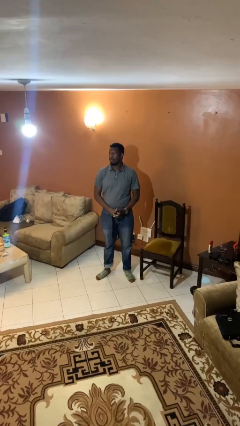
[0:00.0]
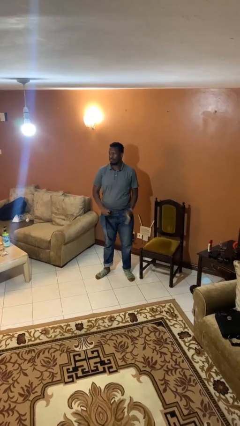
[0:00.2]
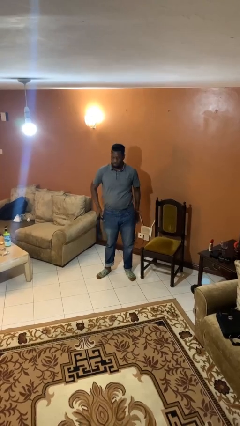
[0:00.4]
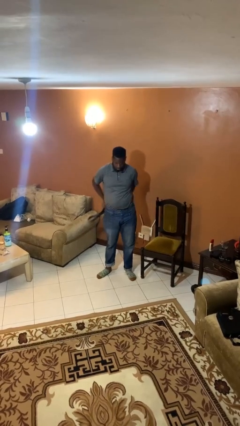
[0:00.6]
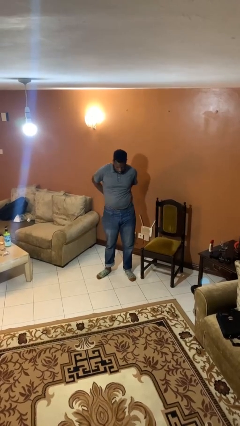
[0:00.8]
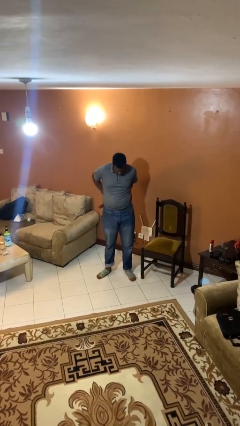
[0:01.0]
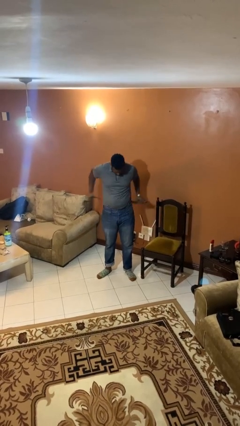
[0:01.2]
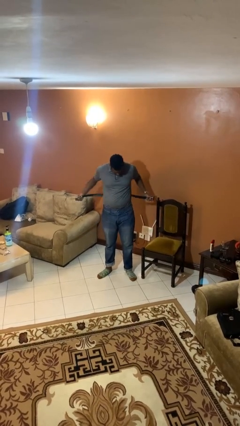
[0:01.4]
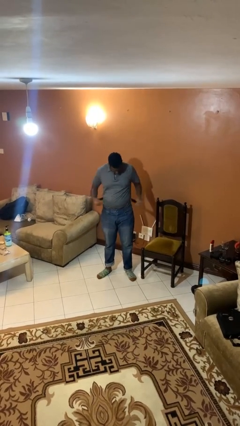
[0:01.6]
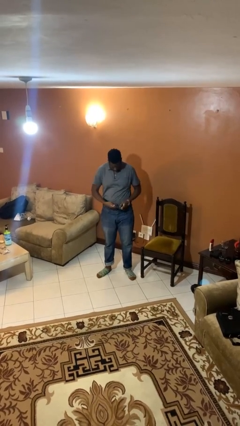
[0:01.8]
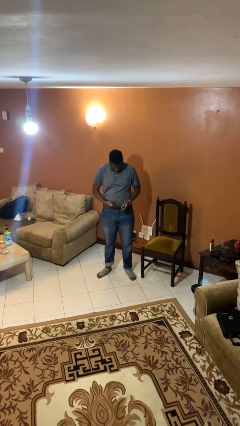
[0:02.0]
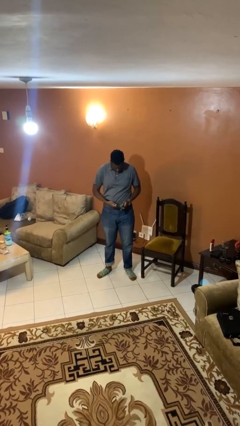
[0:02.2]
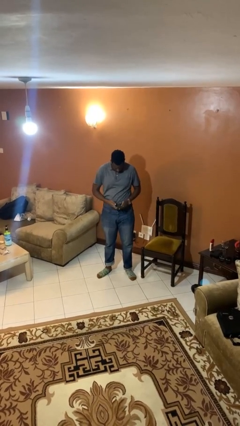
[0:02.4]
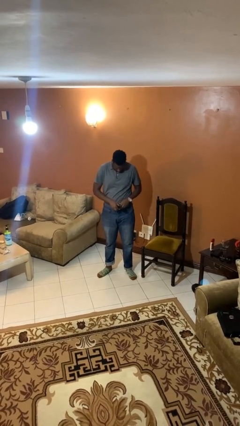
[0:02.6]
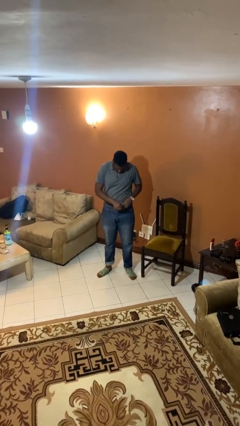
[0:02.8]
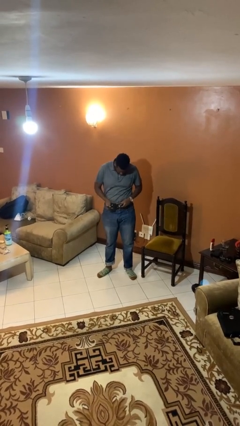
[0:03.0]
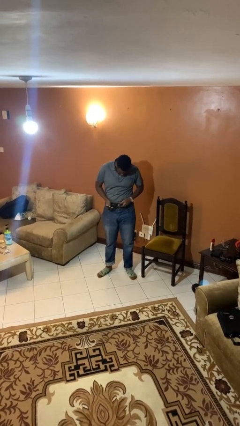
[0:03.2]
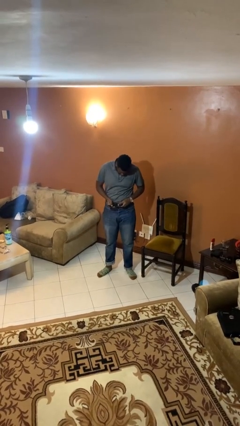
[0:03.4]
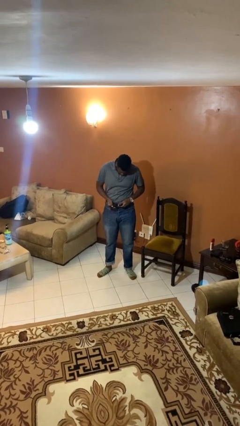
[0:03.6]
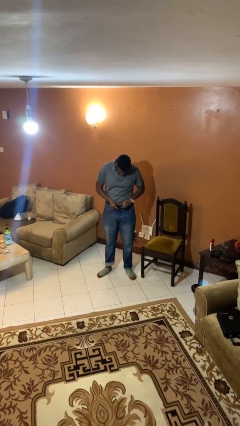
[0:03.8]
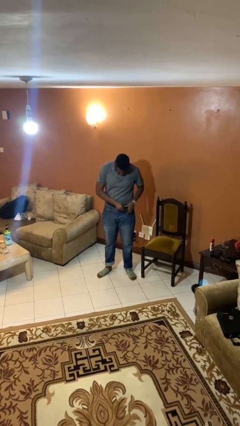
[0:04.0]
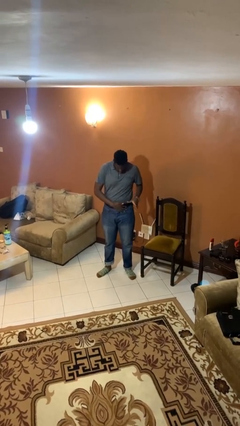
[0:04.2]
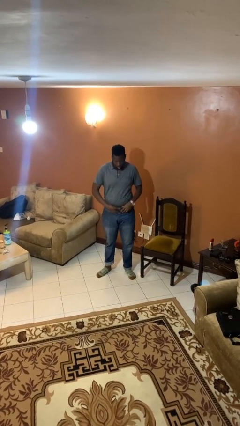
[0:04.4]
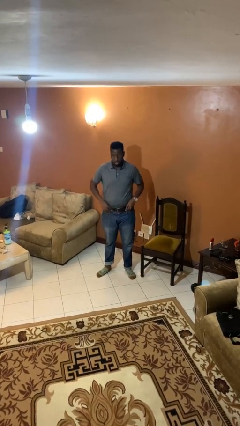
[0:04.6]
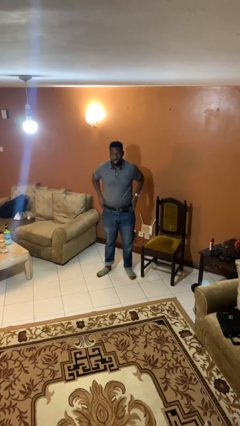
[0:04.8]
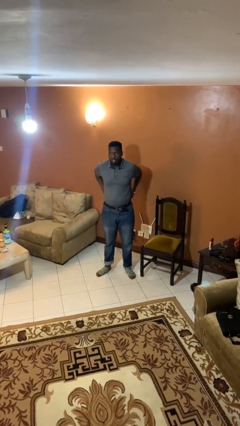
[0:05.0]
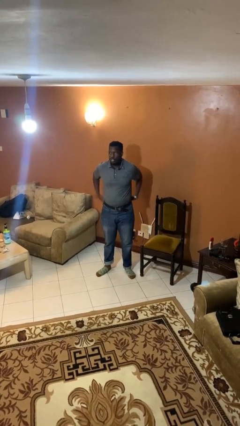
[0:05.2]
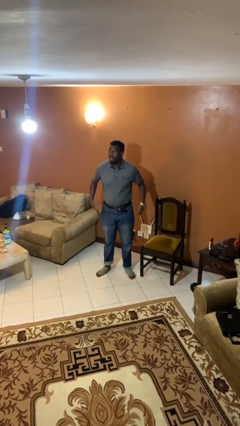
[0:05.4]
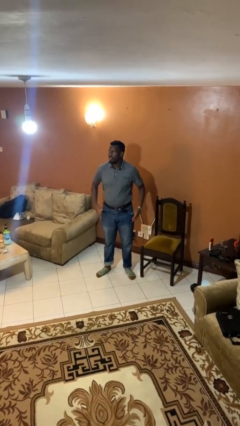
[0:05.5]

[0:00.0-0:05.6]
person puts on belt

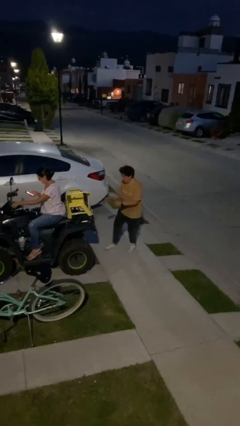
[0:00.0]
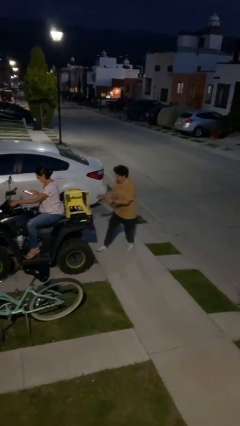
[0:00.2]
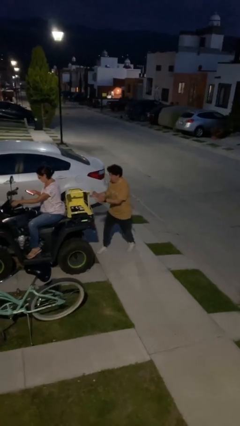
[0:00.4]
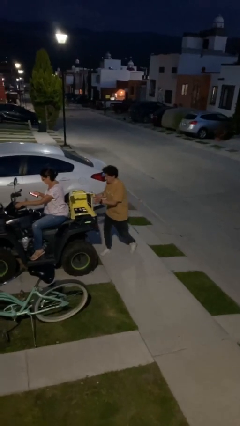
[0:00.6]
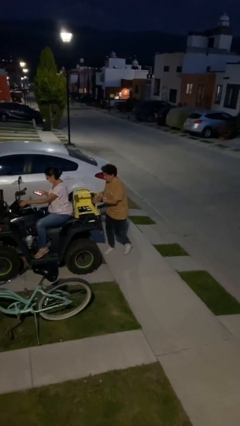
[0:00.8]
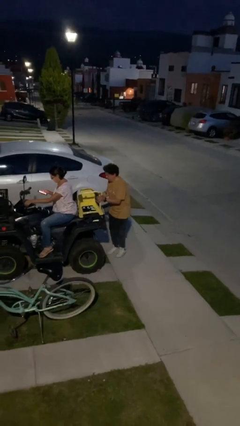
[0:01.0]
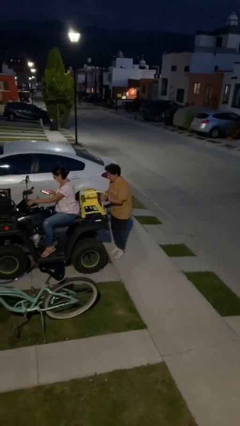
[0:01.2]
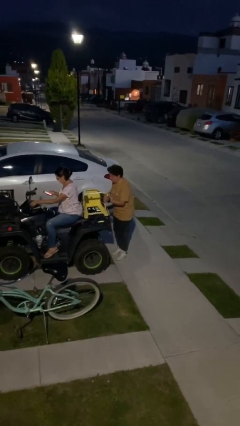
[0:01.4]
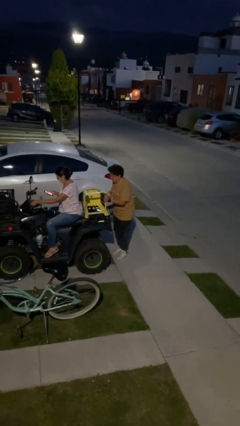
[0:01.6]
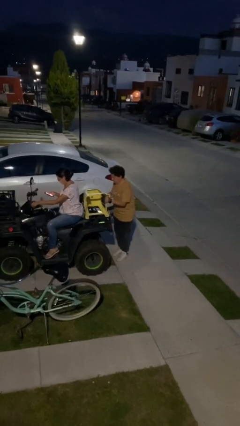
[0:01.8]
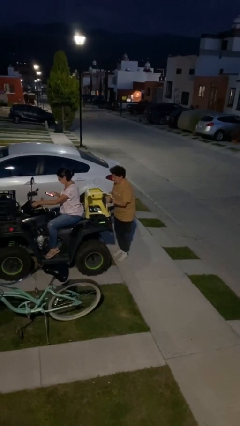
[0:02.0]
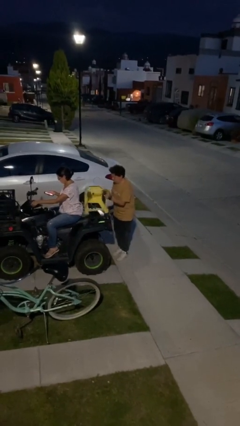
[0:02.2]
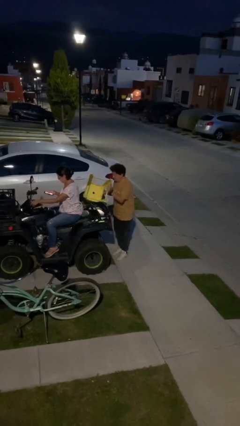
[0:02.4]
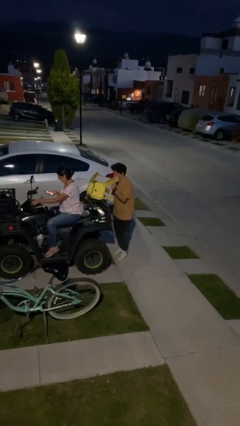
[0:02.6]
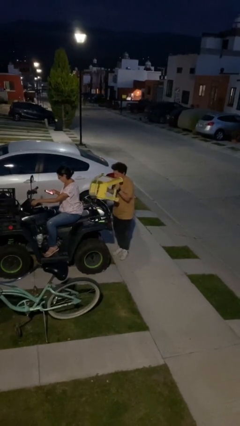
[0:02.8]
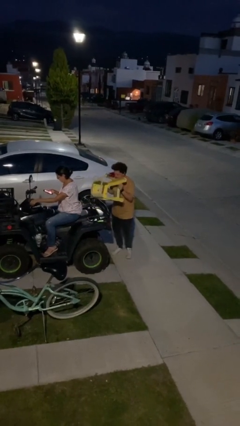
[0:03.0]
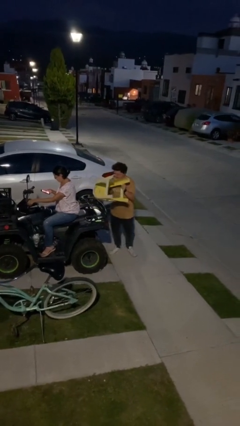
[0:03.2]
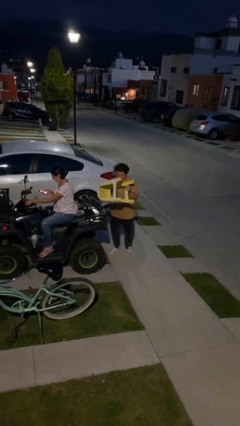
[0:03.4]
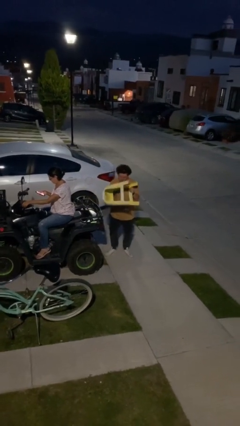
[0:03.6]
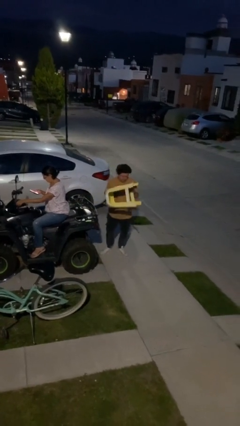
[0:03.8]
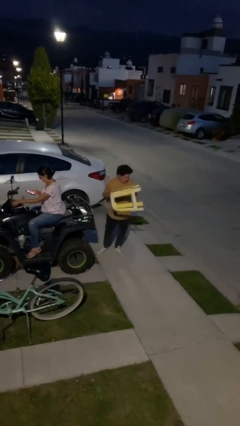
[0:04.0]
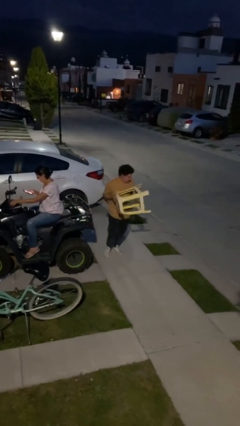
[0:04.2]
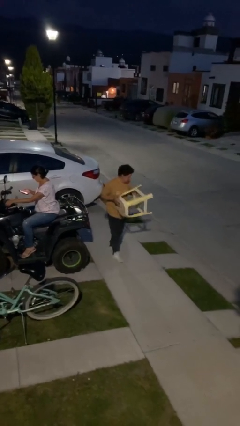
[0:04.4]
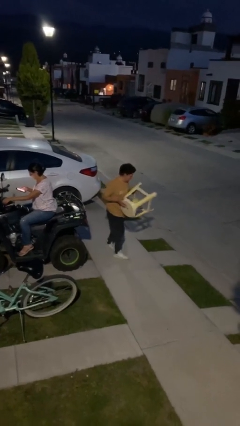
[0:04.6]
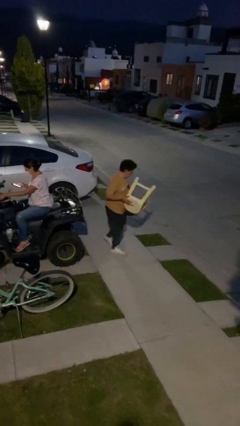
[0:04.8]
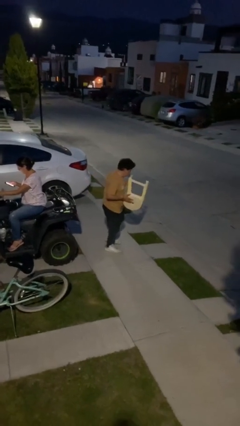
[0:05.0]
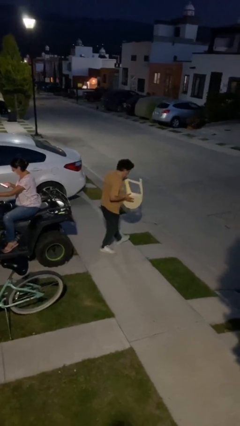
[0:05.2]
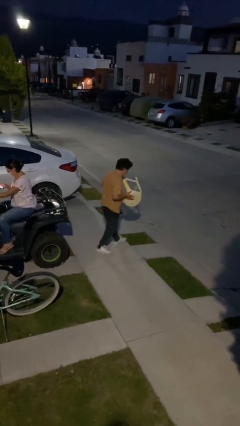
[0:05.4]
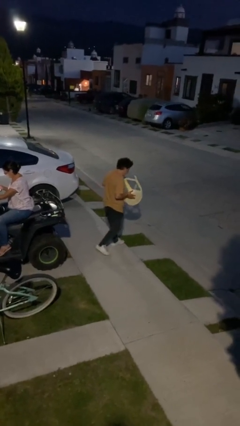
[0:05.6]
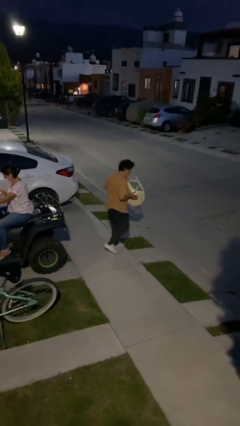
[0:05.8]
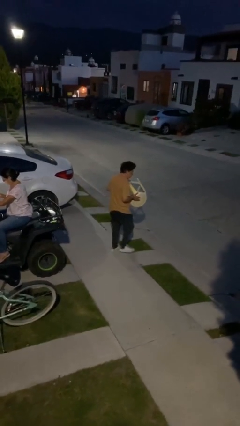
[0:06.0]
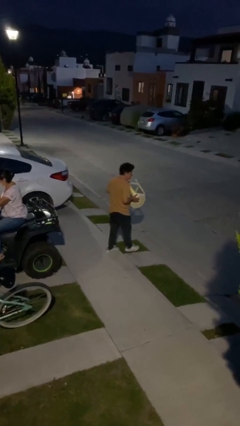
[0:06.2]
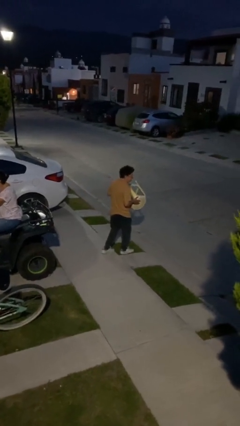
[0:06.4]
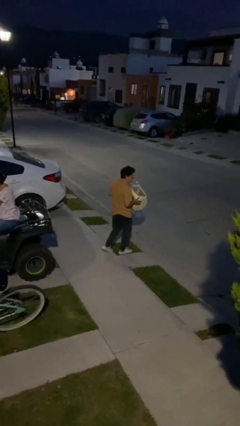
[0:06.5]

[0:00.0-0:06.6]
person steals object from person

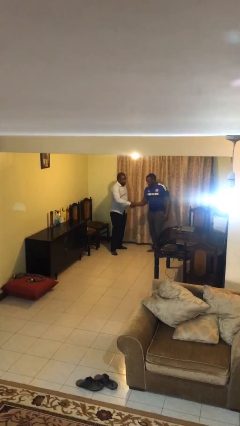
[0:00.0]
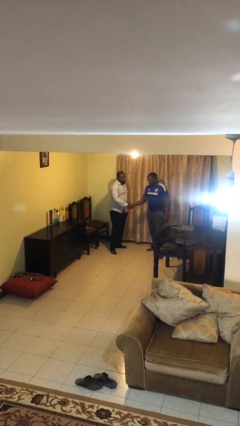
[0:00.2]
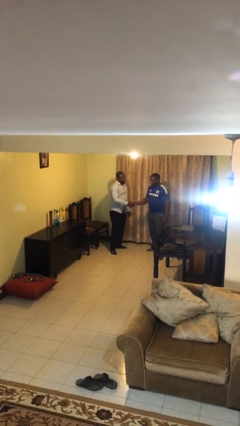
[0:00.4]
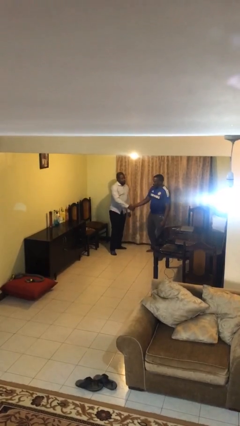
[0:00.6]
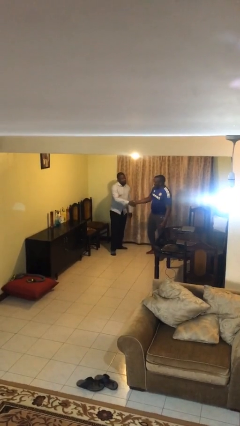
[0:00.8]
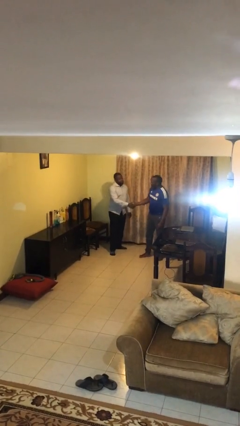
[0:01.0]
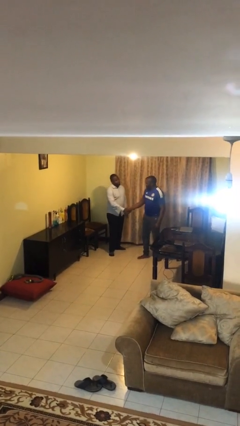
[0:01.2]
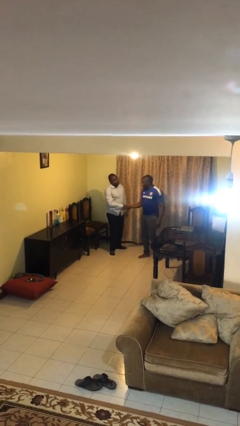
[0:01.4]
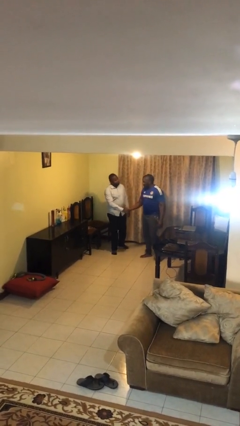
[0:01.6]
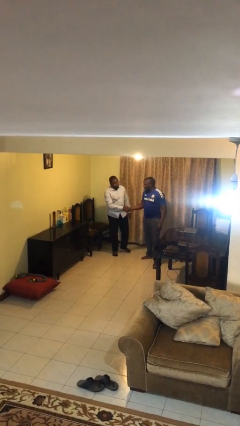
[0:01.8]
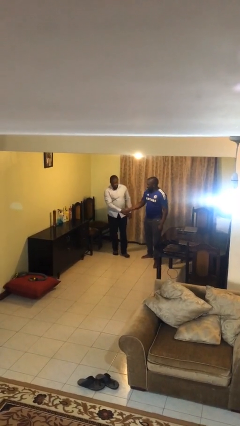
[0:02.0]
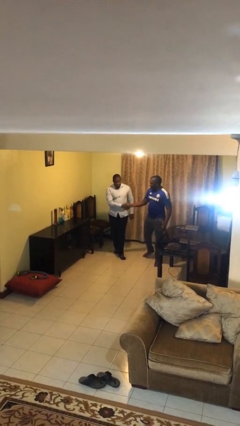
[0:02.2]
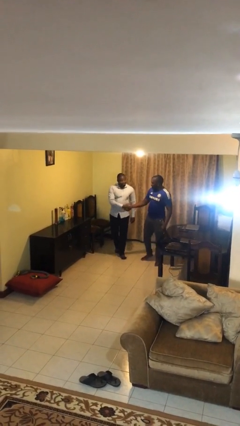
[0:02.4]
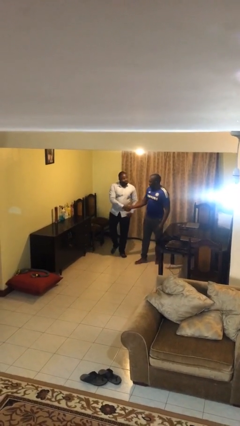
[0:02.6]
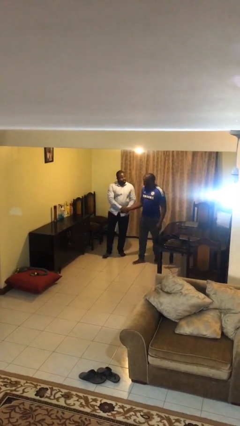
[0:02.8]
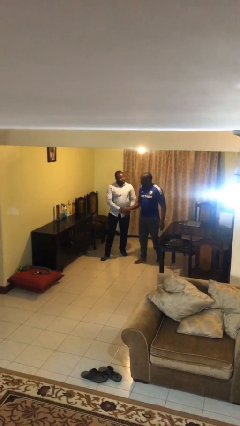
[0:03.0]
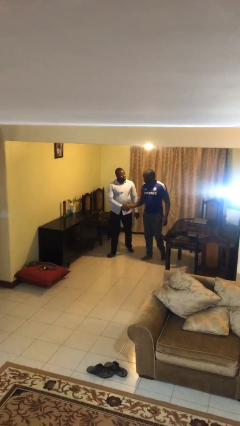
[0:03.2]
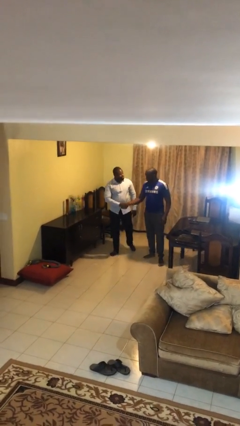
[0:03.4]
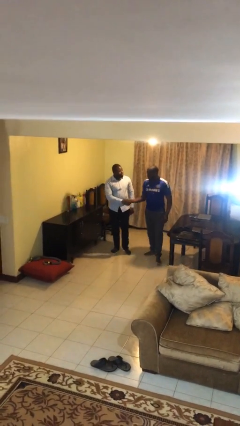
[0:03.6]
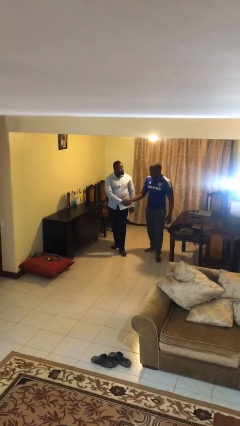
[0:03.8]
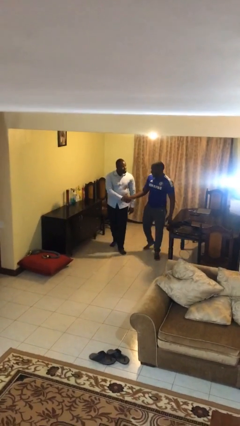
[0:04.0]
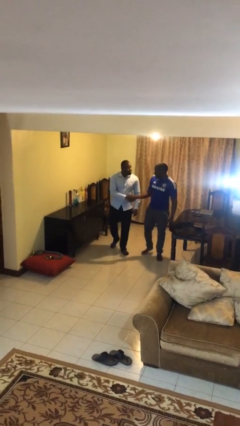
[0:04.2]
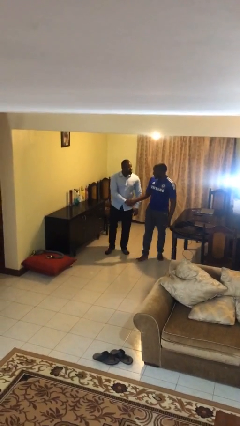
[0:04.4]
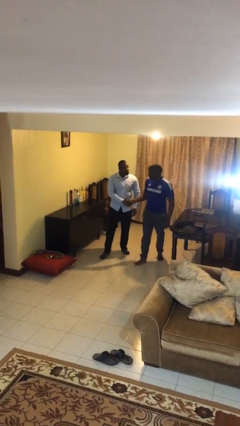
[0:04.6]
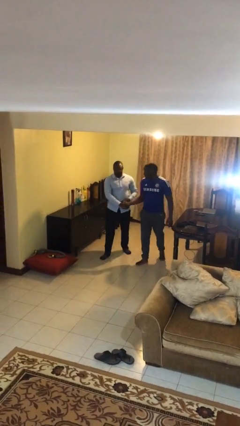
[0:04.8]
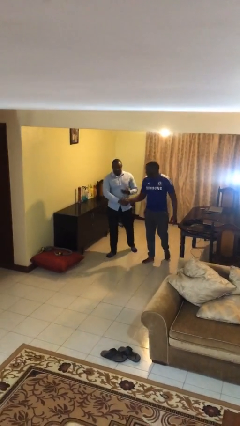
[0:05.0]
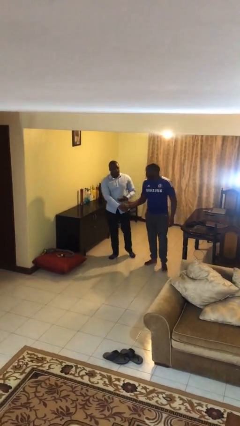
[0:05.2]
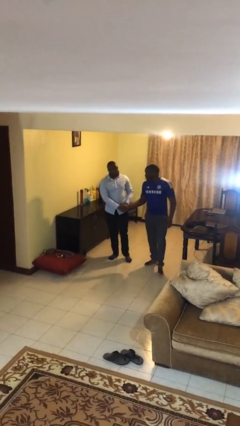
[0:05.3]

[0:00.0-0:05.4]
person holds hand

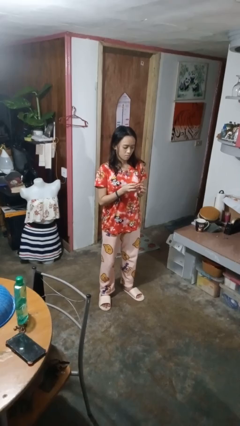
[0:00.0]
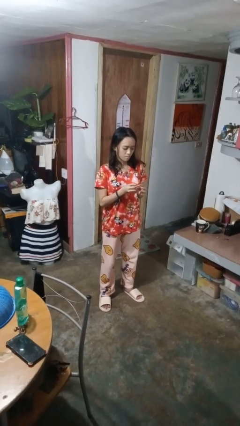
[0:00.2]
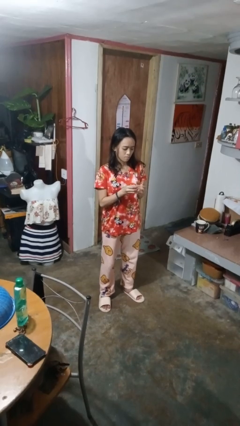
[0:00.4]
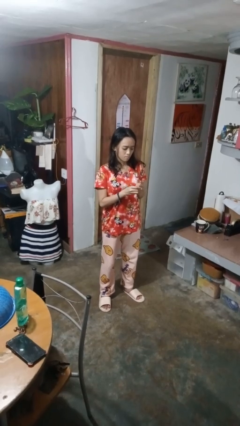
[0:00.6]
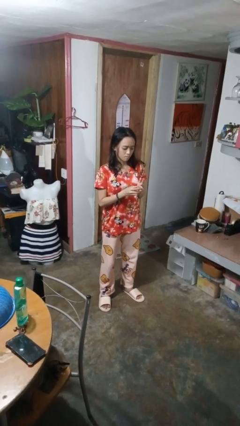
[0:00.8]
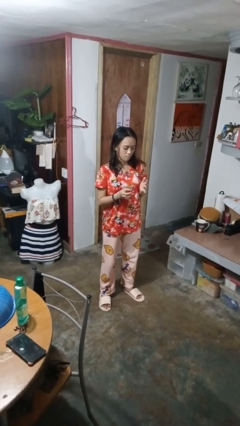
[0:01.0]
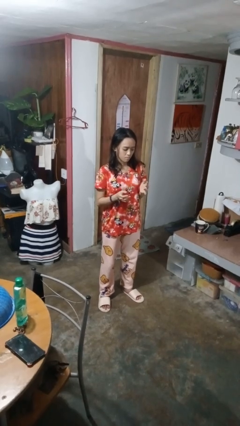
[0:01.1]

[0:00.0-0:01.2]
person puts on ring
